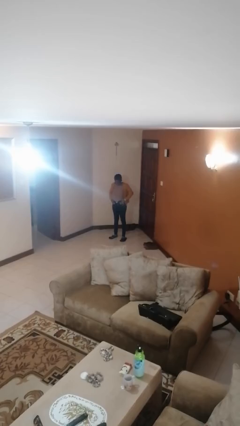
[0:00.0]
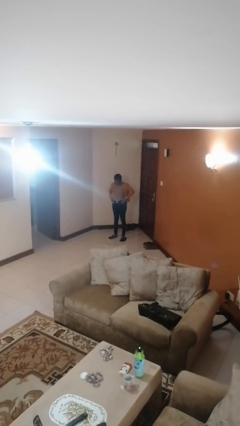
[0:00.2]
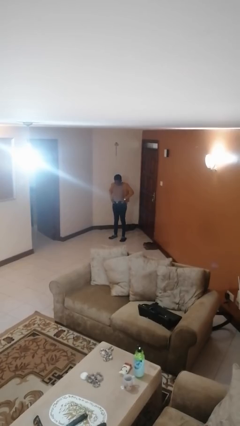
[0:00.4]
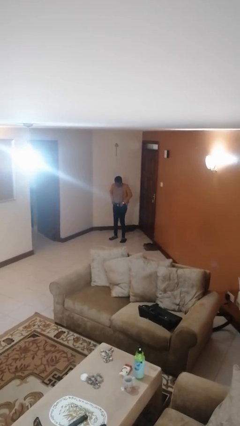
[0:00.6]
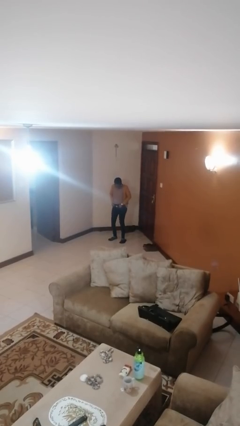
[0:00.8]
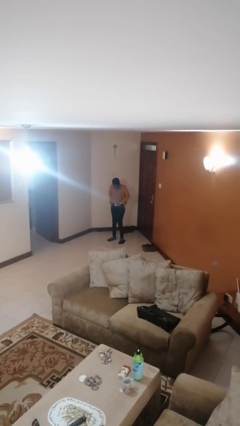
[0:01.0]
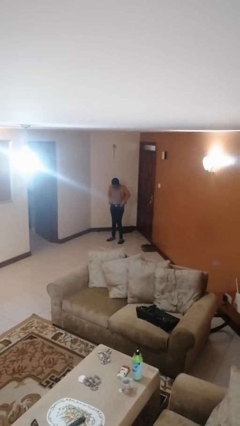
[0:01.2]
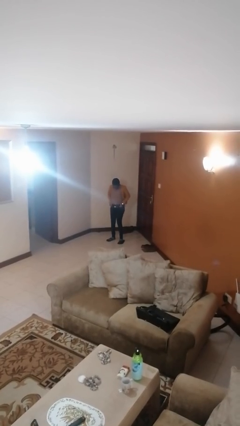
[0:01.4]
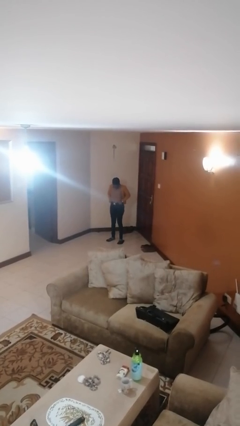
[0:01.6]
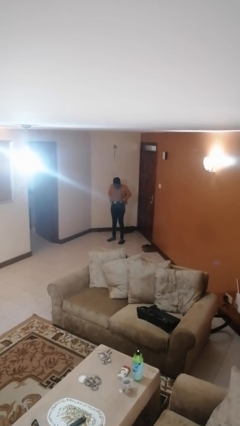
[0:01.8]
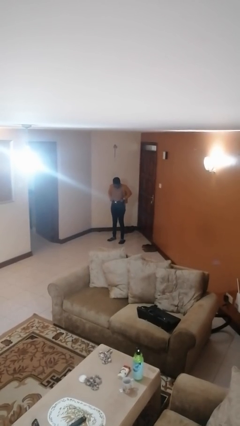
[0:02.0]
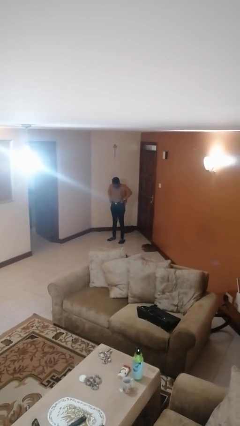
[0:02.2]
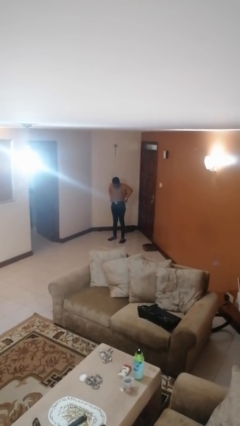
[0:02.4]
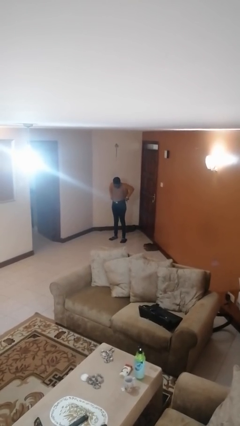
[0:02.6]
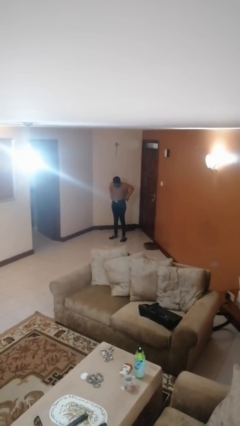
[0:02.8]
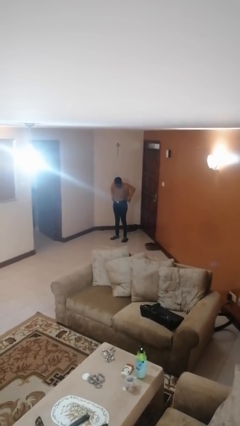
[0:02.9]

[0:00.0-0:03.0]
person hikes up pants

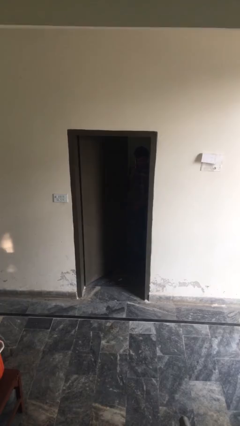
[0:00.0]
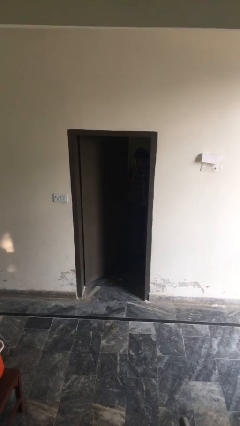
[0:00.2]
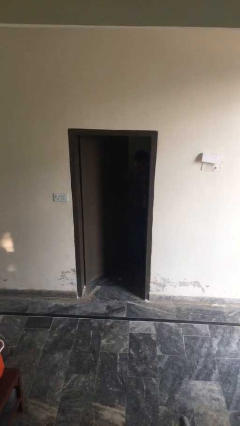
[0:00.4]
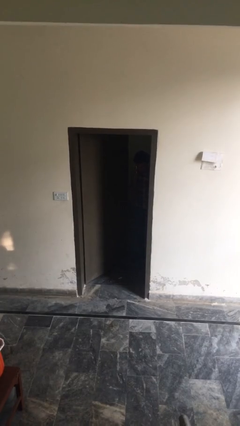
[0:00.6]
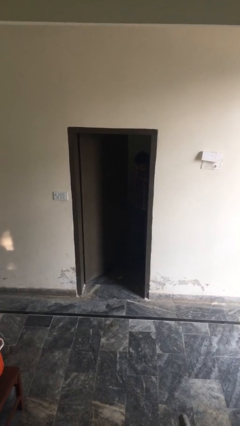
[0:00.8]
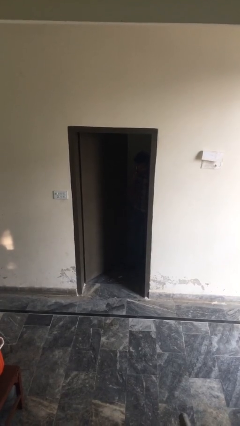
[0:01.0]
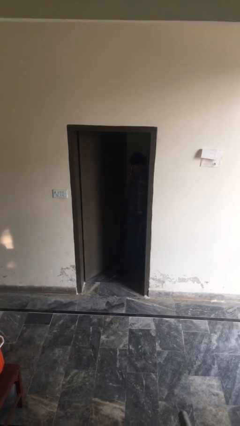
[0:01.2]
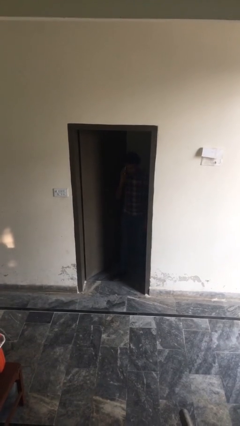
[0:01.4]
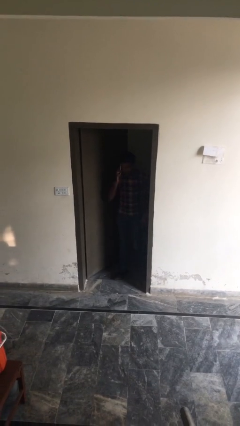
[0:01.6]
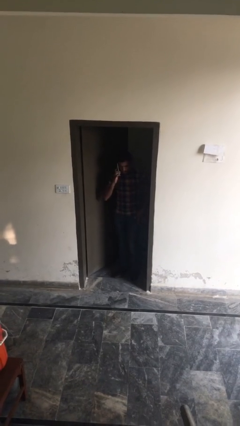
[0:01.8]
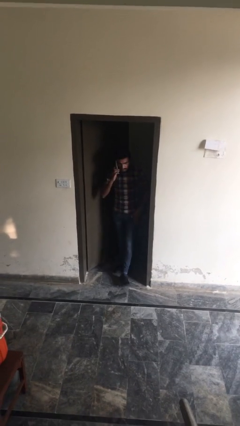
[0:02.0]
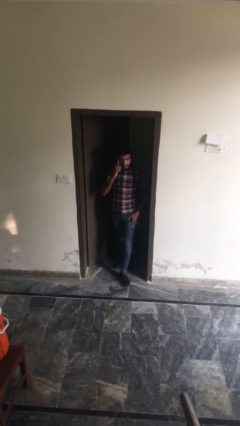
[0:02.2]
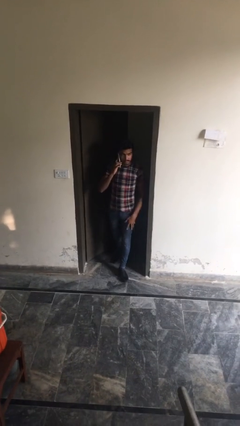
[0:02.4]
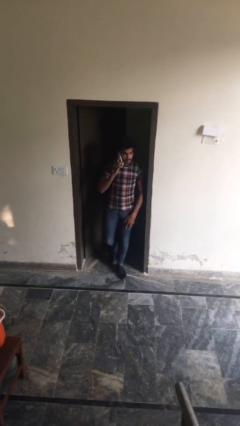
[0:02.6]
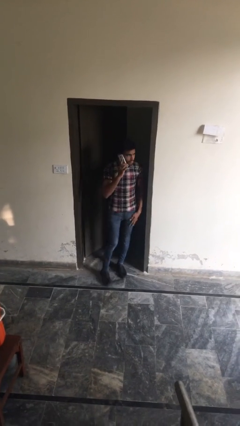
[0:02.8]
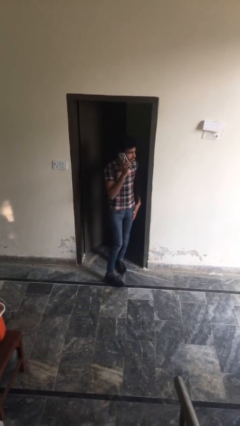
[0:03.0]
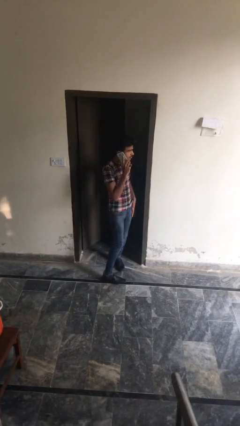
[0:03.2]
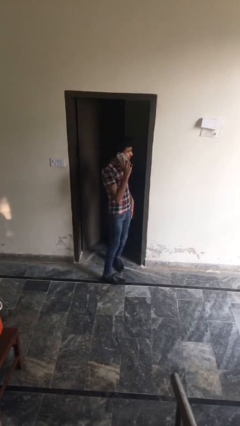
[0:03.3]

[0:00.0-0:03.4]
person enters scene through structure

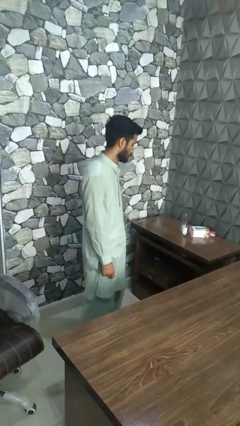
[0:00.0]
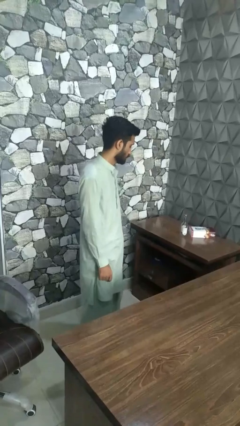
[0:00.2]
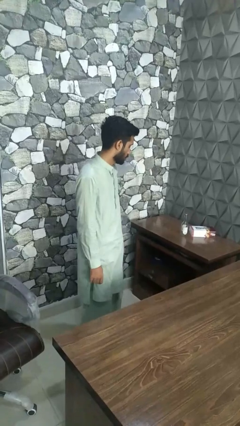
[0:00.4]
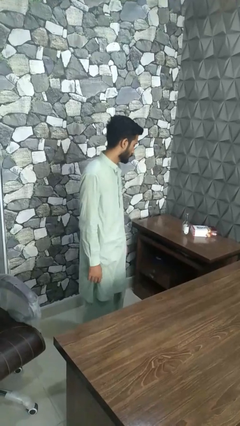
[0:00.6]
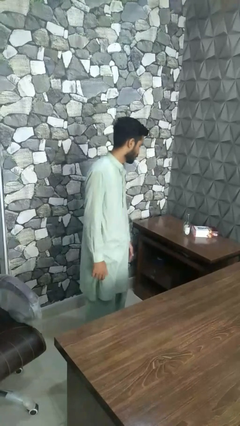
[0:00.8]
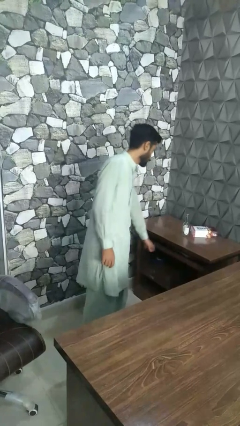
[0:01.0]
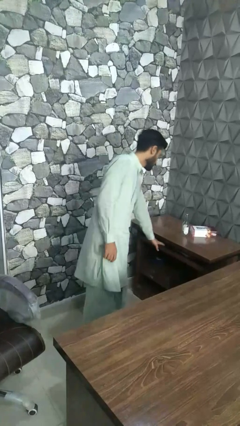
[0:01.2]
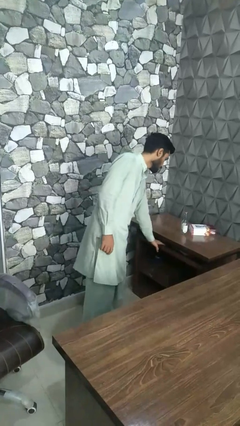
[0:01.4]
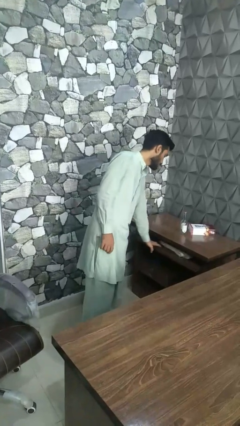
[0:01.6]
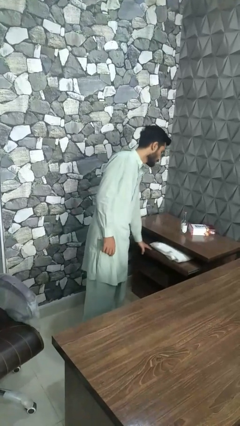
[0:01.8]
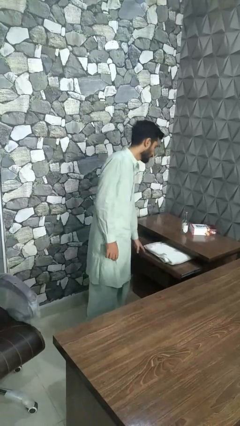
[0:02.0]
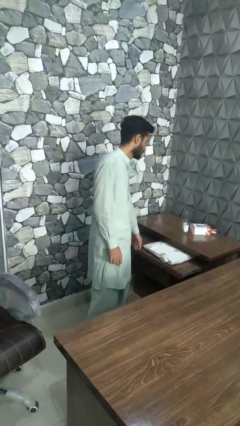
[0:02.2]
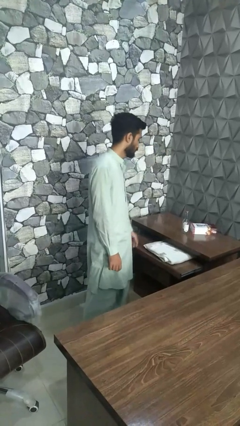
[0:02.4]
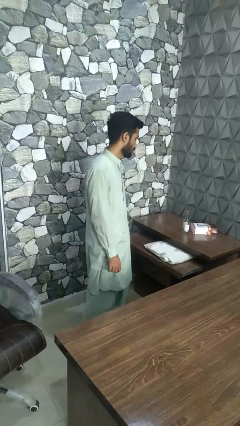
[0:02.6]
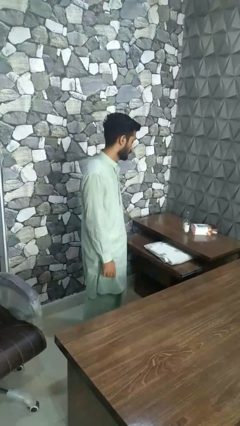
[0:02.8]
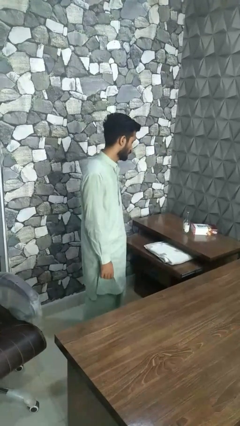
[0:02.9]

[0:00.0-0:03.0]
person opens dresser drawer

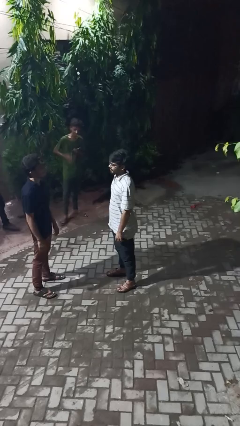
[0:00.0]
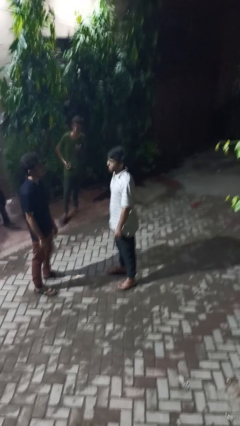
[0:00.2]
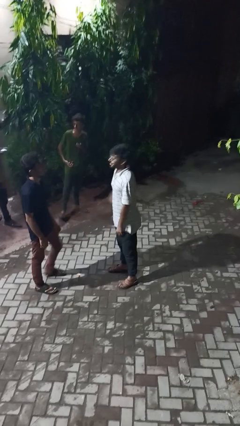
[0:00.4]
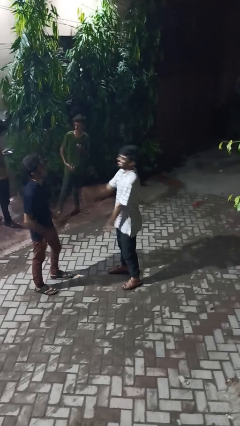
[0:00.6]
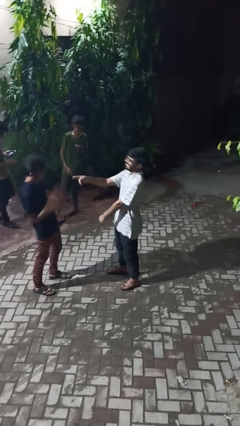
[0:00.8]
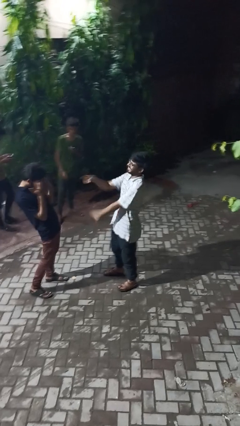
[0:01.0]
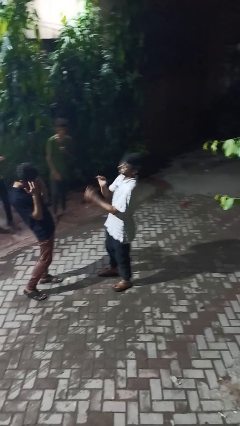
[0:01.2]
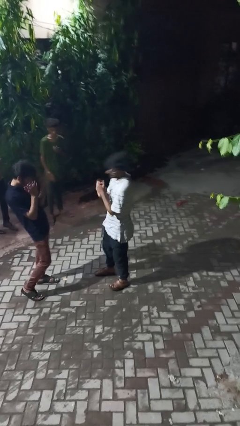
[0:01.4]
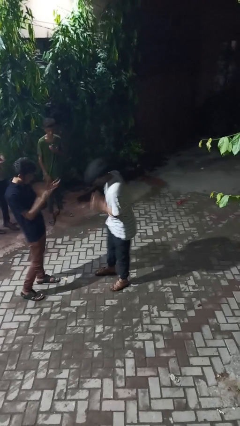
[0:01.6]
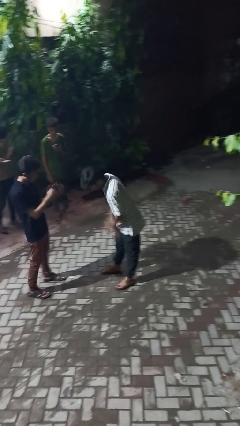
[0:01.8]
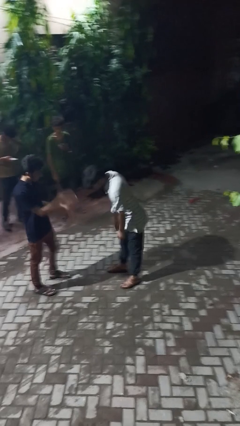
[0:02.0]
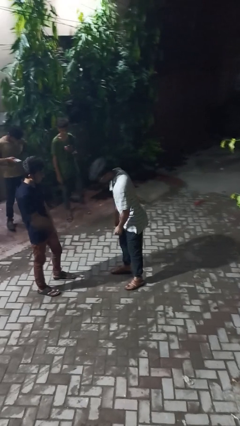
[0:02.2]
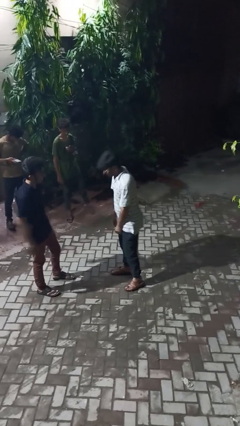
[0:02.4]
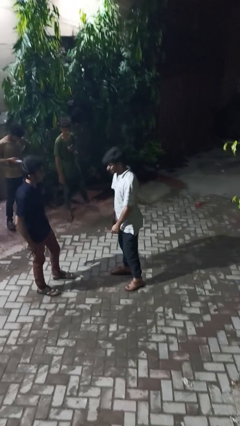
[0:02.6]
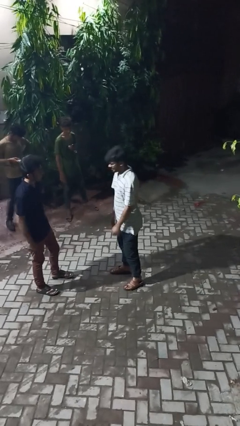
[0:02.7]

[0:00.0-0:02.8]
person laughs with person

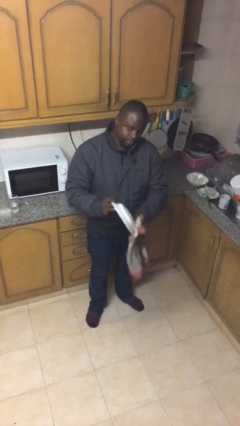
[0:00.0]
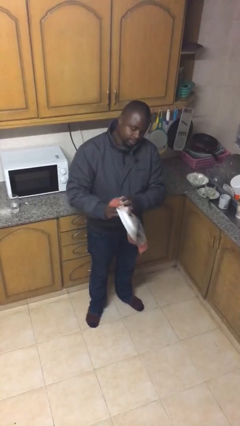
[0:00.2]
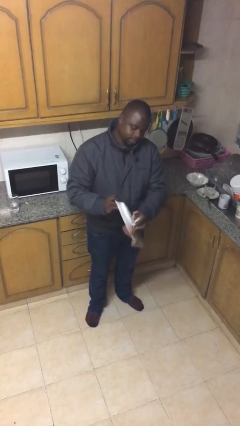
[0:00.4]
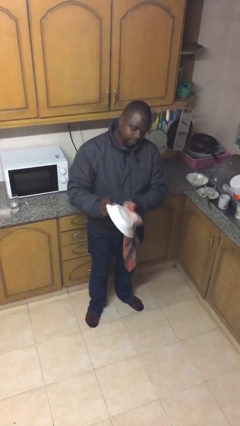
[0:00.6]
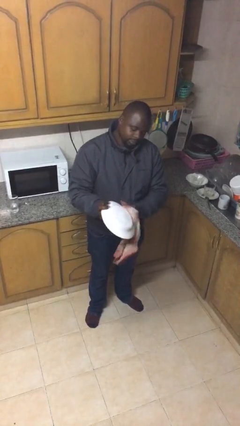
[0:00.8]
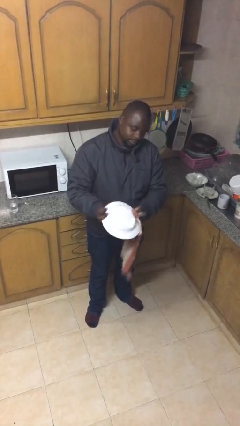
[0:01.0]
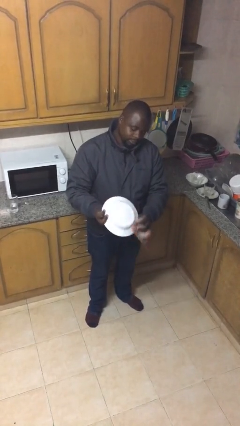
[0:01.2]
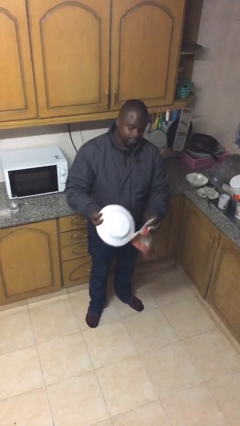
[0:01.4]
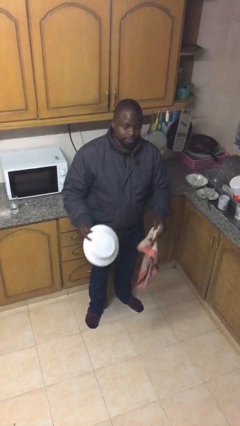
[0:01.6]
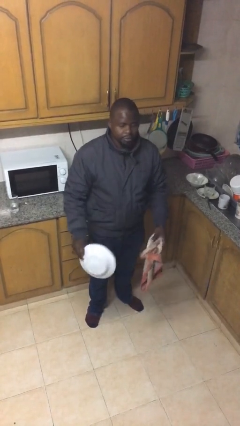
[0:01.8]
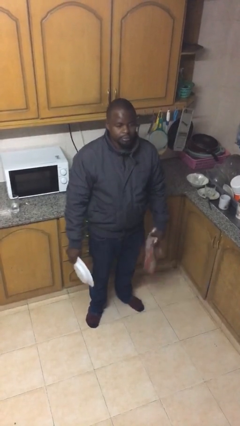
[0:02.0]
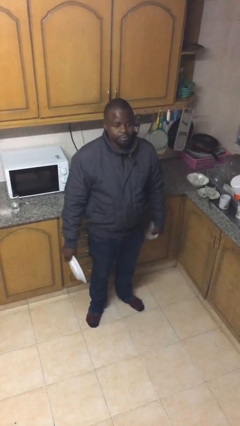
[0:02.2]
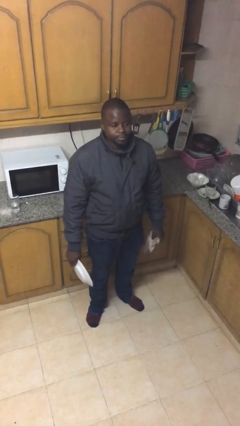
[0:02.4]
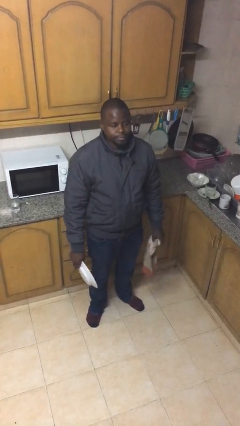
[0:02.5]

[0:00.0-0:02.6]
person dries dish

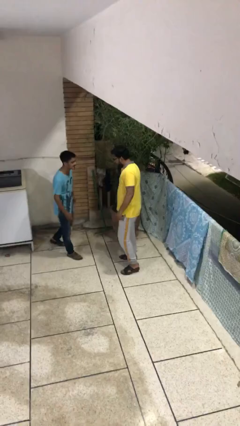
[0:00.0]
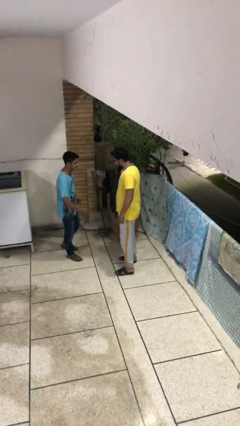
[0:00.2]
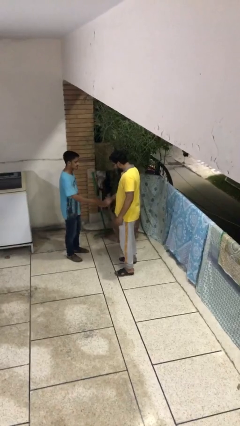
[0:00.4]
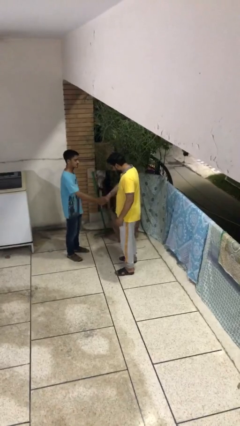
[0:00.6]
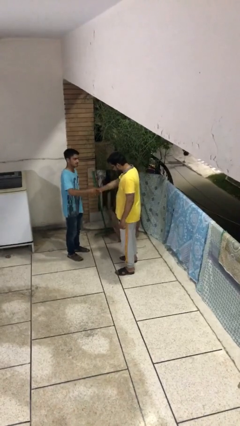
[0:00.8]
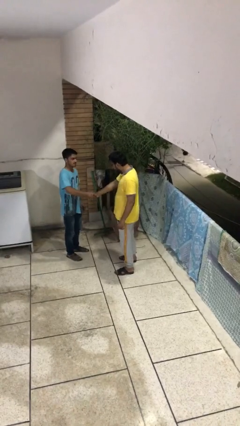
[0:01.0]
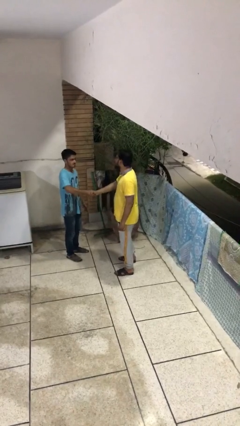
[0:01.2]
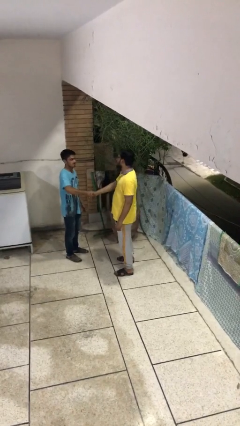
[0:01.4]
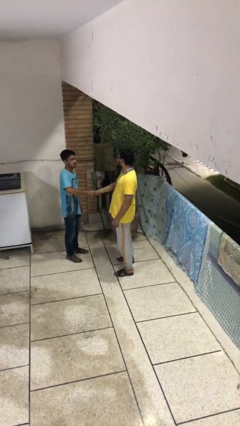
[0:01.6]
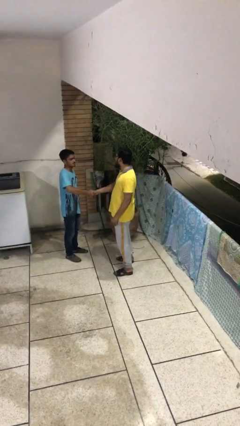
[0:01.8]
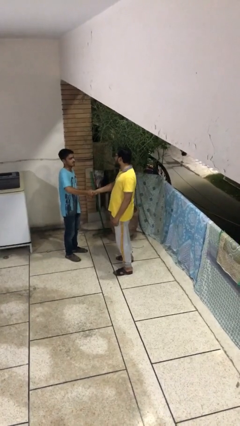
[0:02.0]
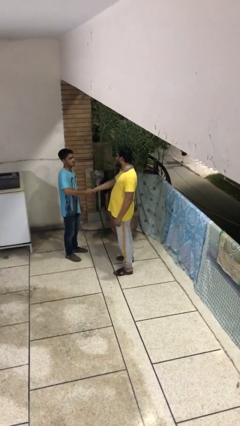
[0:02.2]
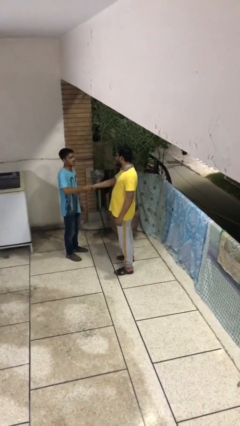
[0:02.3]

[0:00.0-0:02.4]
person shakes hand
